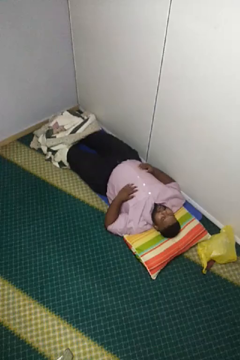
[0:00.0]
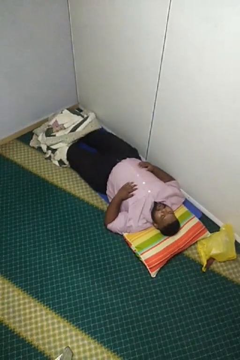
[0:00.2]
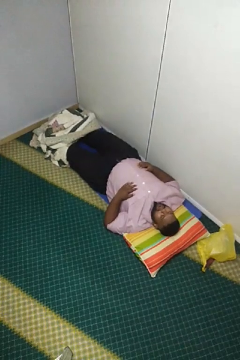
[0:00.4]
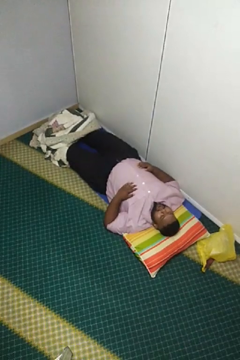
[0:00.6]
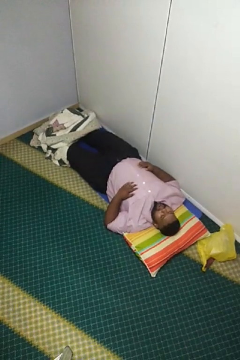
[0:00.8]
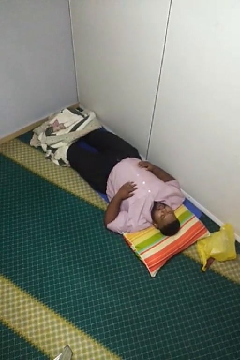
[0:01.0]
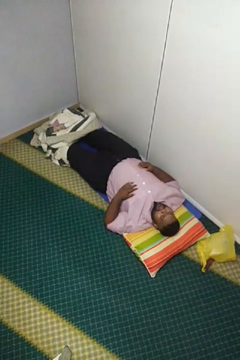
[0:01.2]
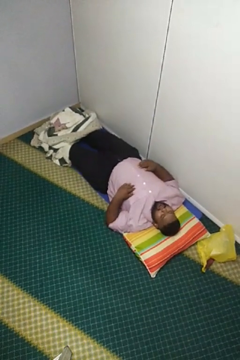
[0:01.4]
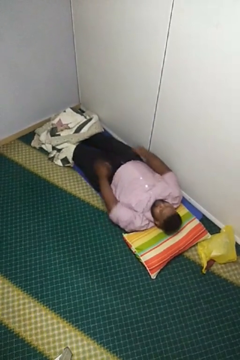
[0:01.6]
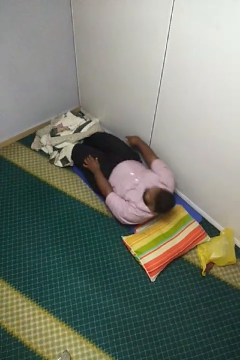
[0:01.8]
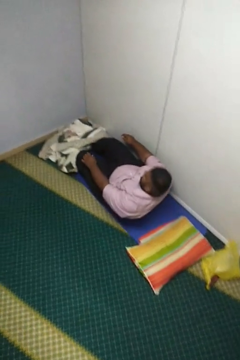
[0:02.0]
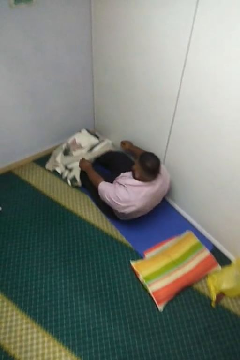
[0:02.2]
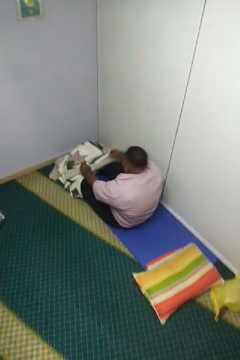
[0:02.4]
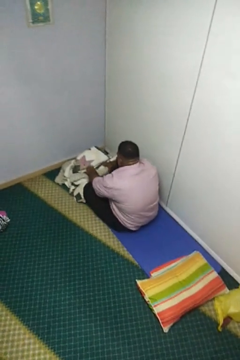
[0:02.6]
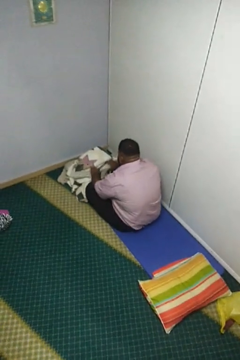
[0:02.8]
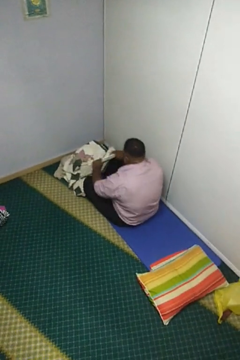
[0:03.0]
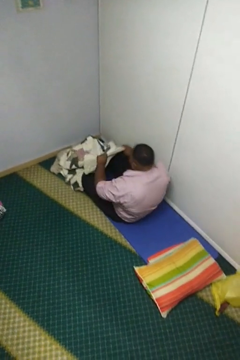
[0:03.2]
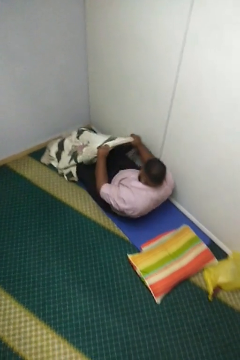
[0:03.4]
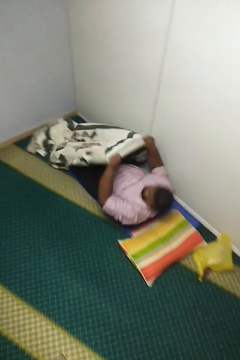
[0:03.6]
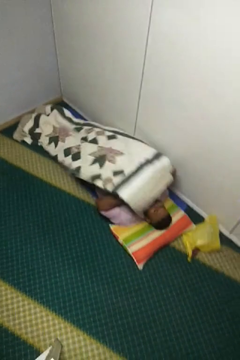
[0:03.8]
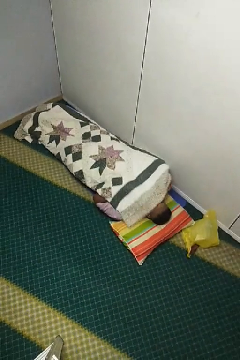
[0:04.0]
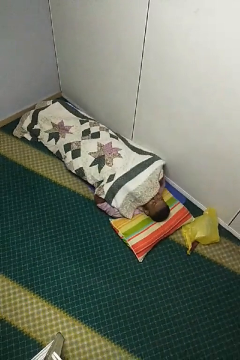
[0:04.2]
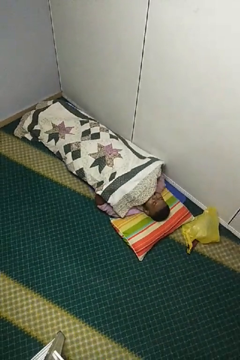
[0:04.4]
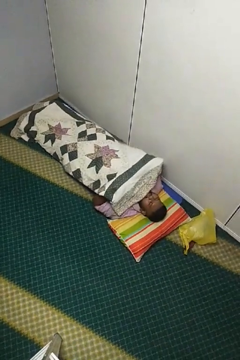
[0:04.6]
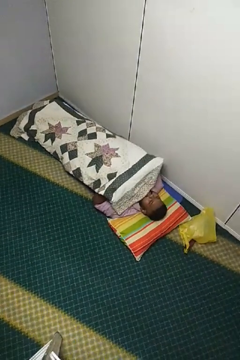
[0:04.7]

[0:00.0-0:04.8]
person covers with bedsheets

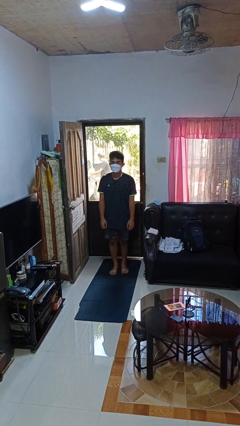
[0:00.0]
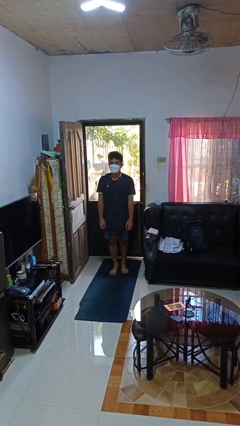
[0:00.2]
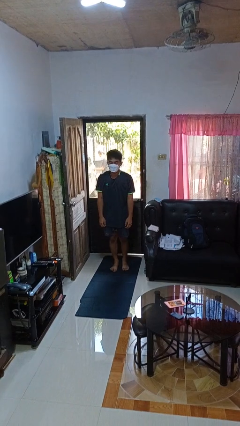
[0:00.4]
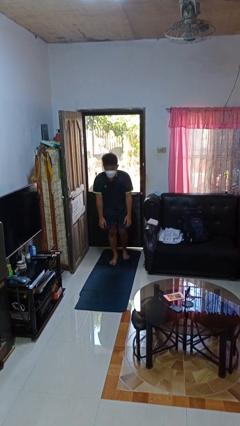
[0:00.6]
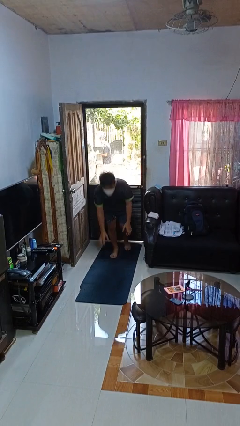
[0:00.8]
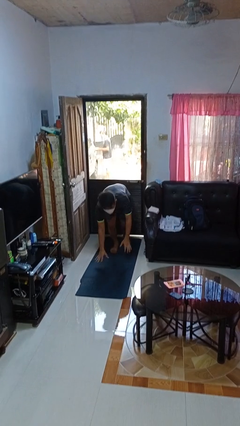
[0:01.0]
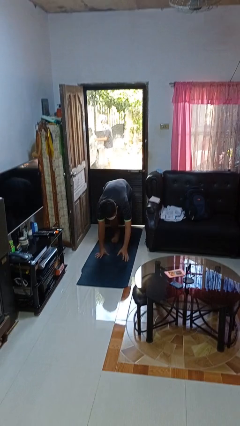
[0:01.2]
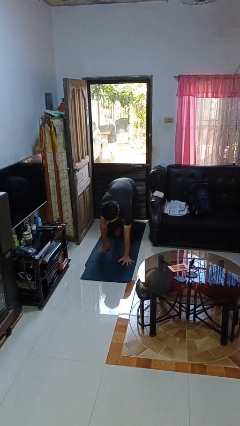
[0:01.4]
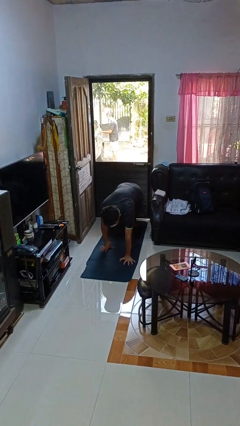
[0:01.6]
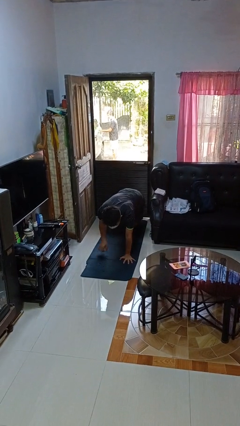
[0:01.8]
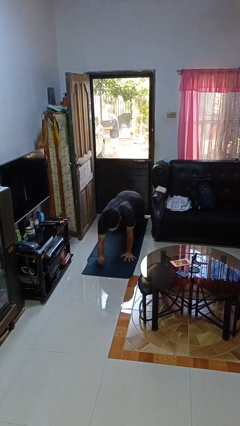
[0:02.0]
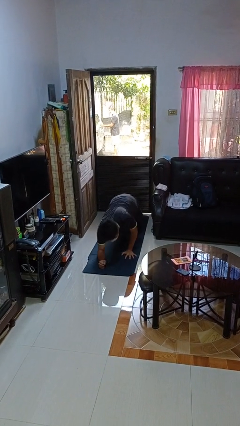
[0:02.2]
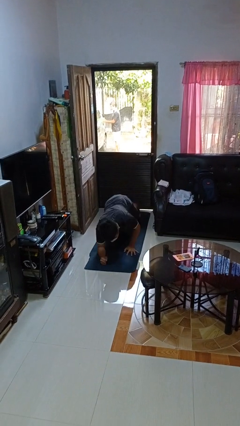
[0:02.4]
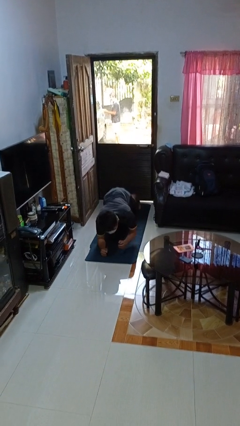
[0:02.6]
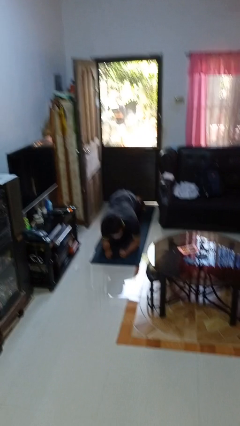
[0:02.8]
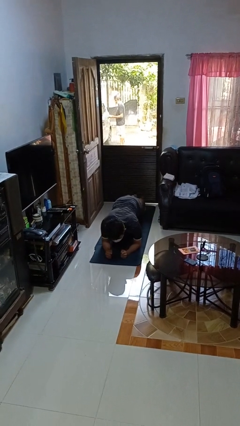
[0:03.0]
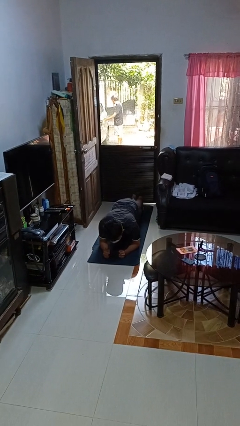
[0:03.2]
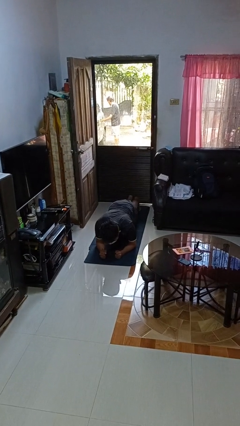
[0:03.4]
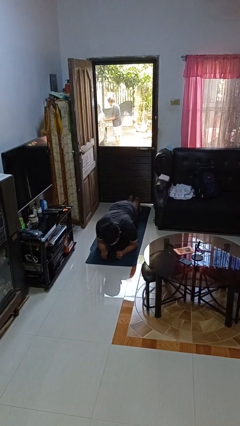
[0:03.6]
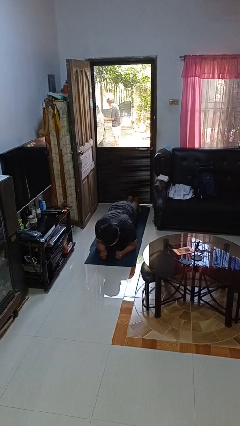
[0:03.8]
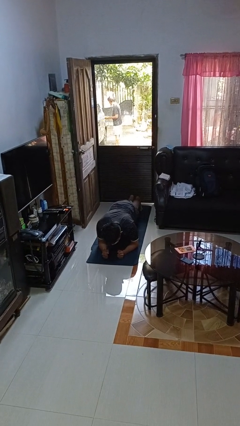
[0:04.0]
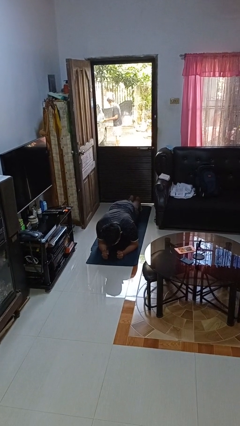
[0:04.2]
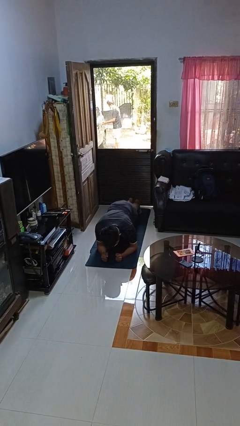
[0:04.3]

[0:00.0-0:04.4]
person exercises with plank

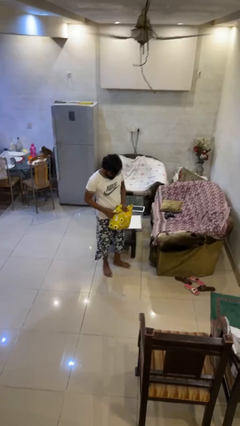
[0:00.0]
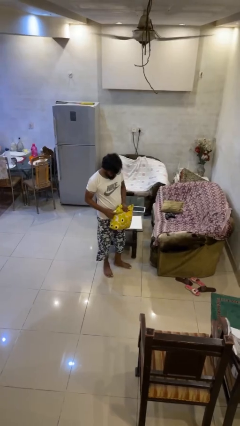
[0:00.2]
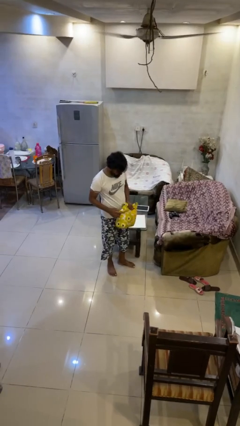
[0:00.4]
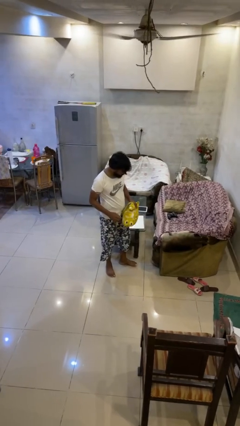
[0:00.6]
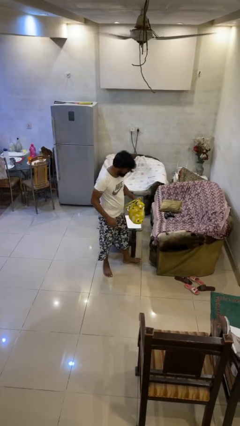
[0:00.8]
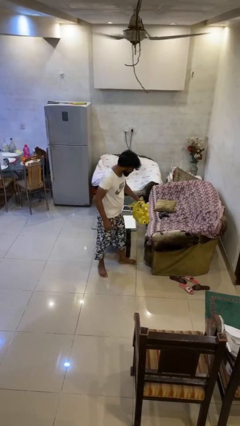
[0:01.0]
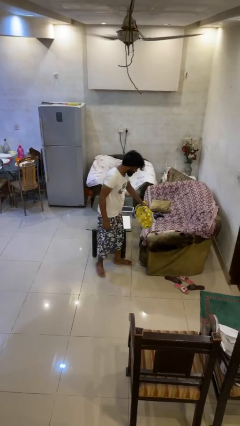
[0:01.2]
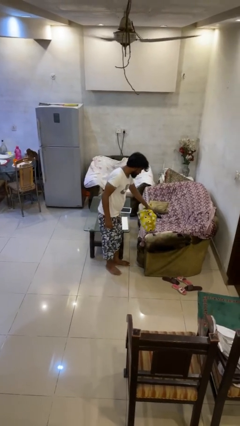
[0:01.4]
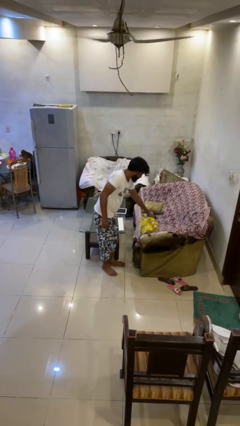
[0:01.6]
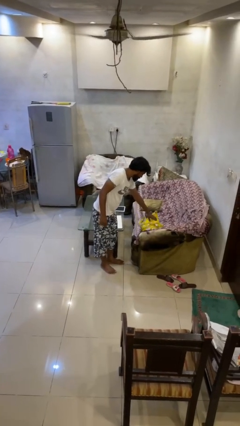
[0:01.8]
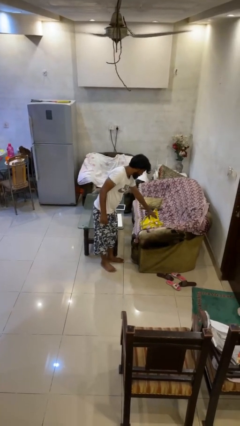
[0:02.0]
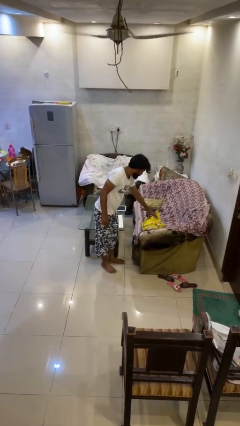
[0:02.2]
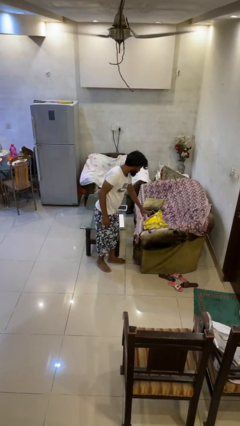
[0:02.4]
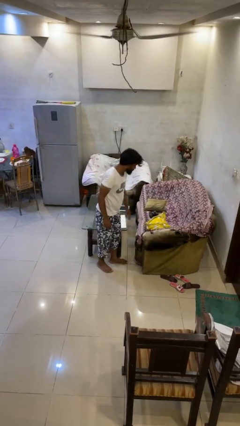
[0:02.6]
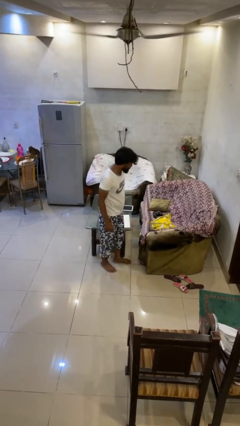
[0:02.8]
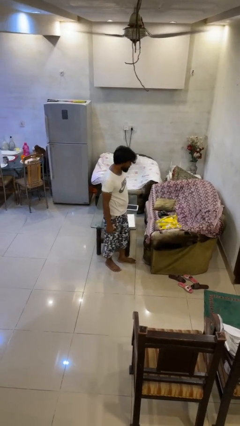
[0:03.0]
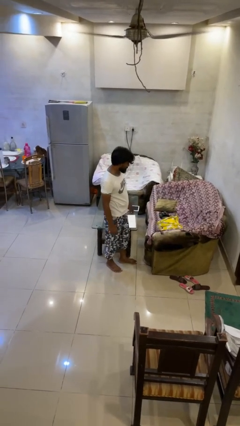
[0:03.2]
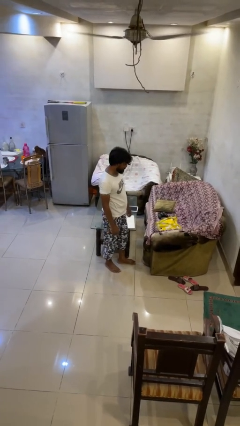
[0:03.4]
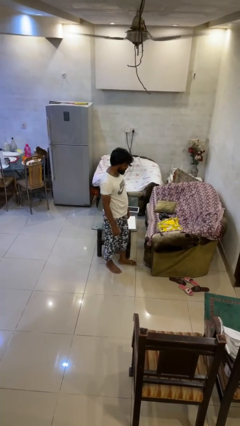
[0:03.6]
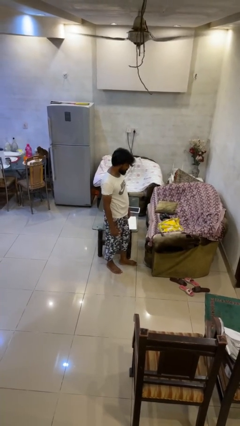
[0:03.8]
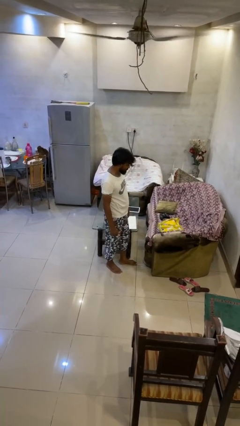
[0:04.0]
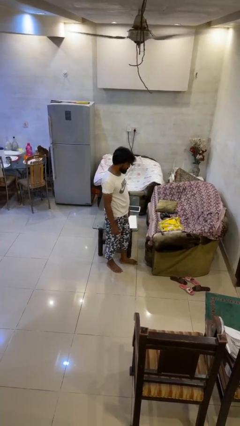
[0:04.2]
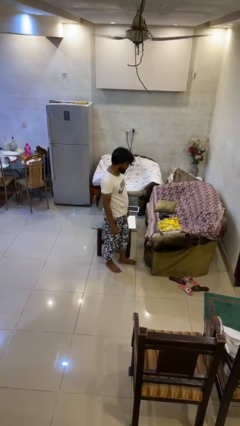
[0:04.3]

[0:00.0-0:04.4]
person puts down object on couch

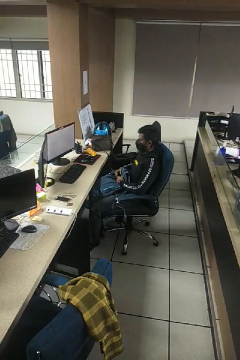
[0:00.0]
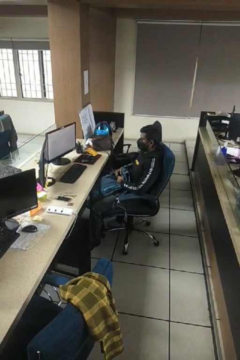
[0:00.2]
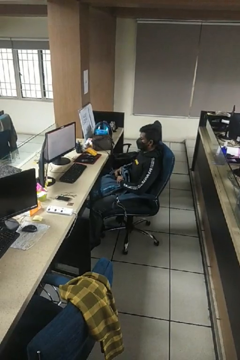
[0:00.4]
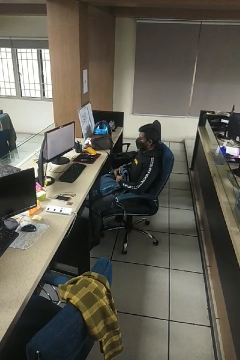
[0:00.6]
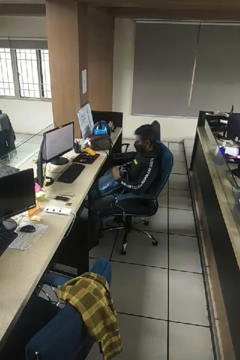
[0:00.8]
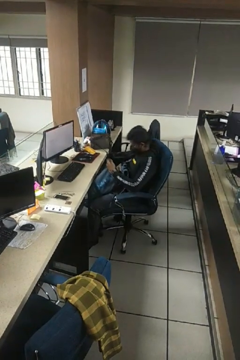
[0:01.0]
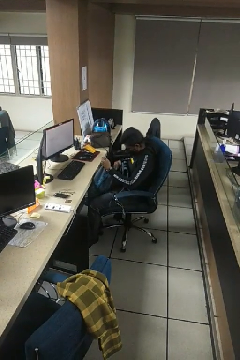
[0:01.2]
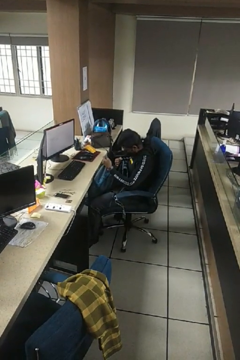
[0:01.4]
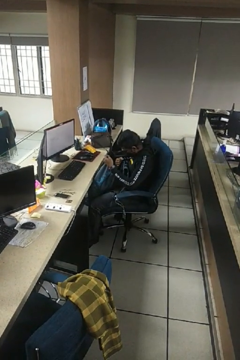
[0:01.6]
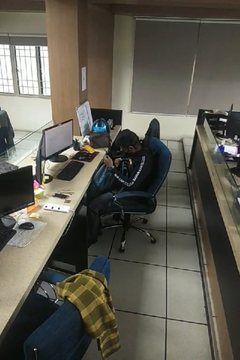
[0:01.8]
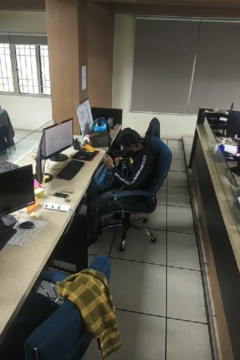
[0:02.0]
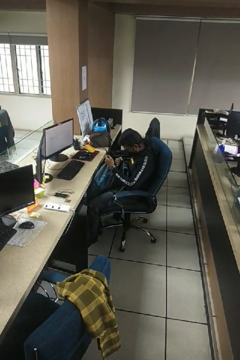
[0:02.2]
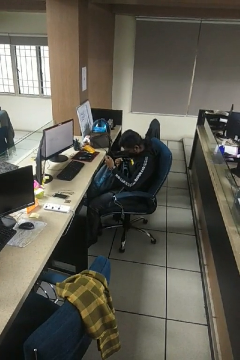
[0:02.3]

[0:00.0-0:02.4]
person searches in backpack

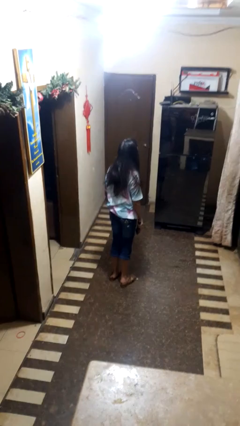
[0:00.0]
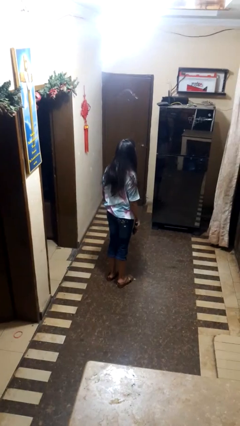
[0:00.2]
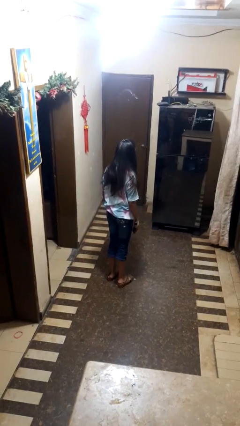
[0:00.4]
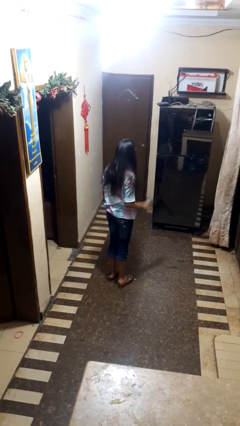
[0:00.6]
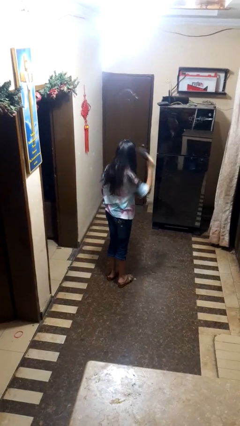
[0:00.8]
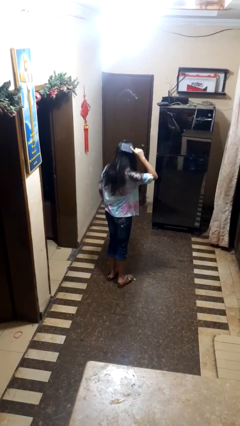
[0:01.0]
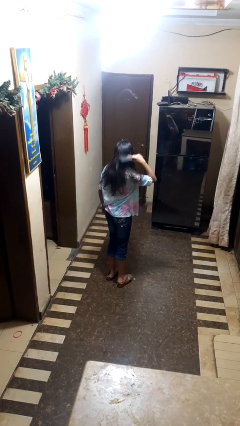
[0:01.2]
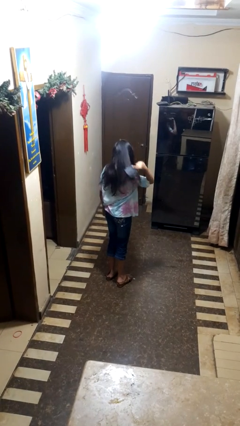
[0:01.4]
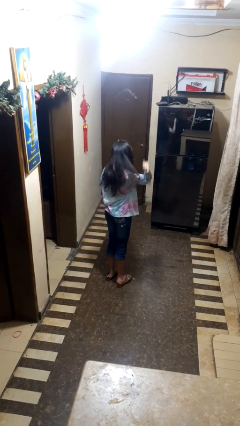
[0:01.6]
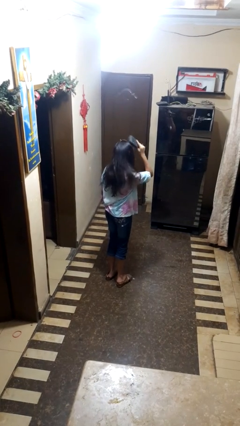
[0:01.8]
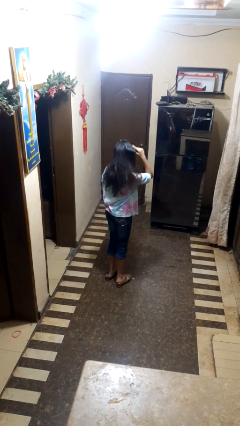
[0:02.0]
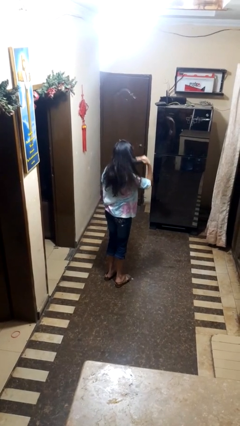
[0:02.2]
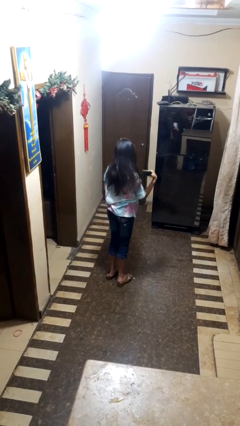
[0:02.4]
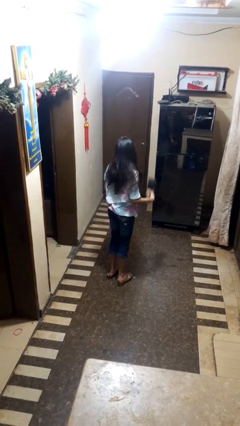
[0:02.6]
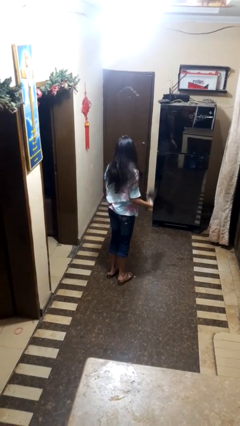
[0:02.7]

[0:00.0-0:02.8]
person brushes hair

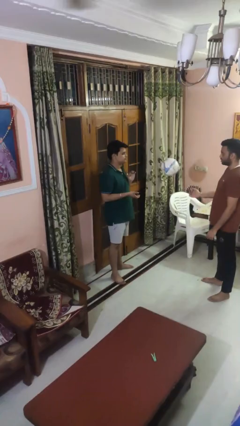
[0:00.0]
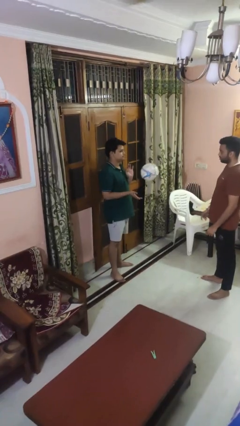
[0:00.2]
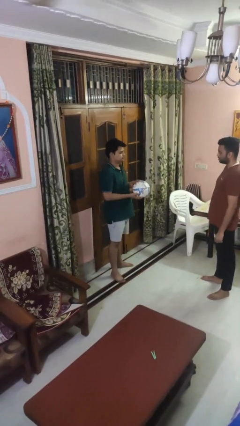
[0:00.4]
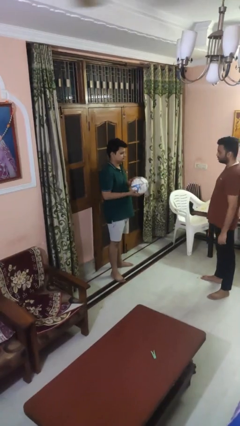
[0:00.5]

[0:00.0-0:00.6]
person catches object from person
